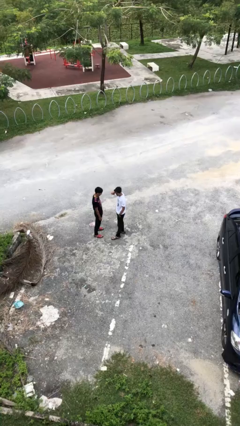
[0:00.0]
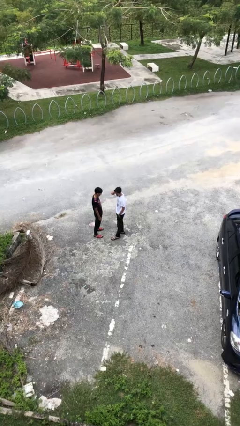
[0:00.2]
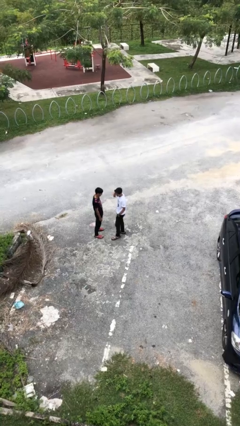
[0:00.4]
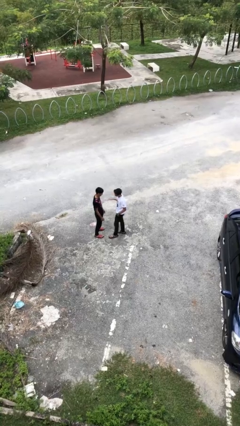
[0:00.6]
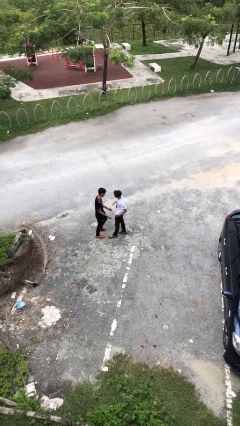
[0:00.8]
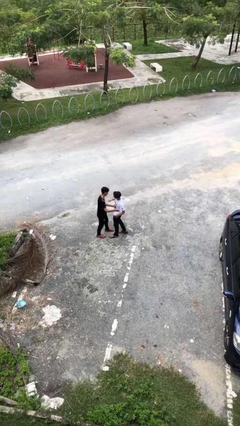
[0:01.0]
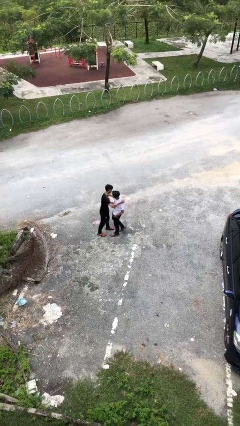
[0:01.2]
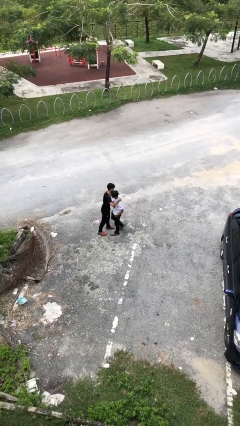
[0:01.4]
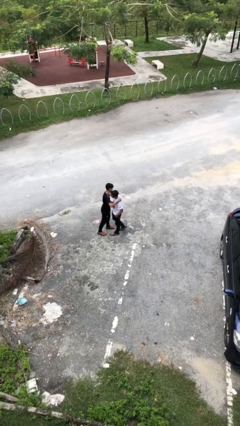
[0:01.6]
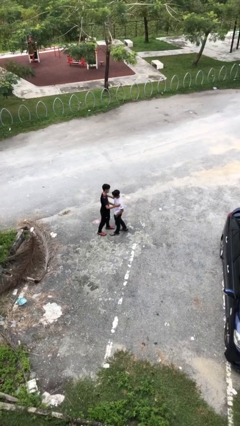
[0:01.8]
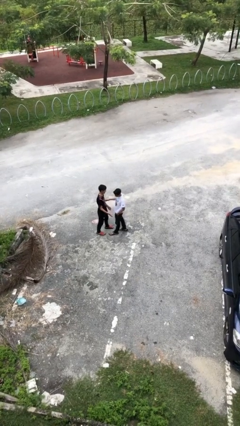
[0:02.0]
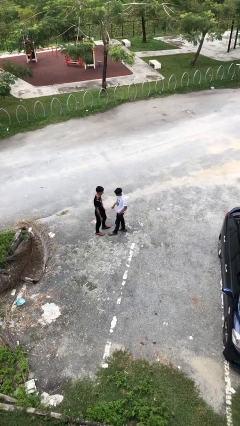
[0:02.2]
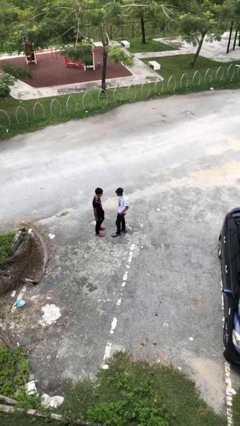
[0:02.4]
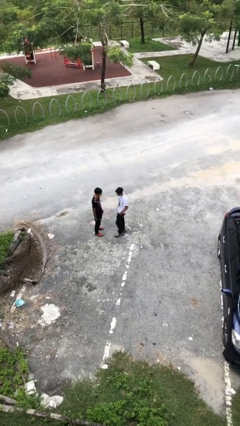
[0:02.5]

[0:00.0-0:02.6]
person embraces person

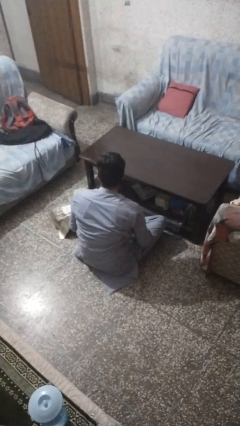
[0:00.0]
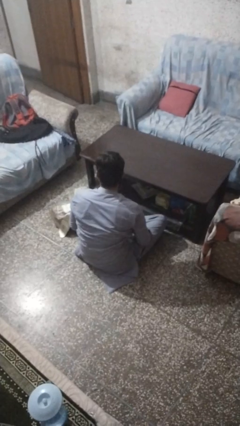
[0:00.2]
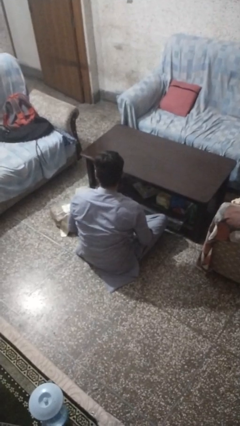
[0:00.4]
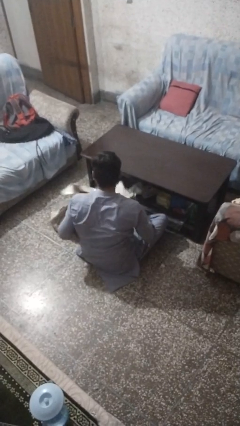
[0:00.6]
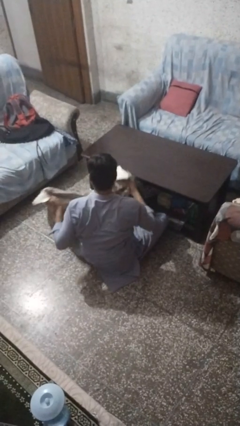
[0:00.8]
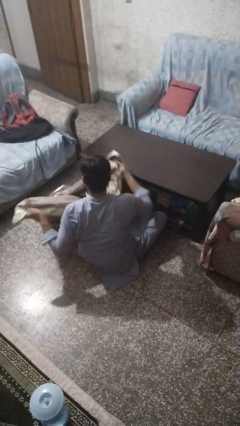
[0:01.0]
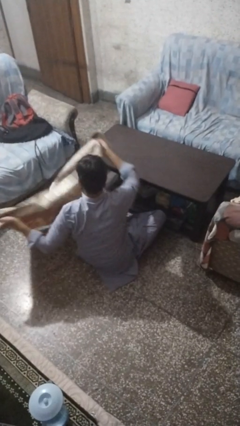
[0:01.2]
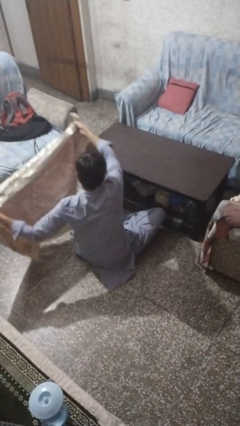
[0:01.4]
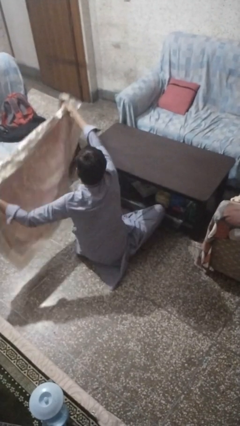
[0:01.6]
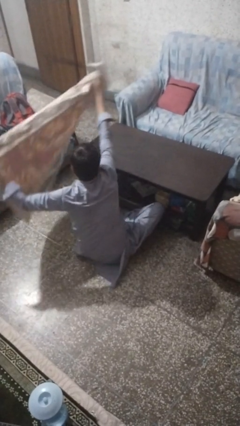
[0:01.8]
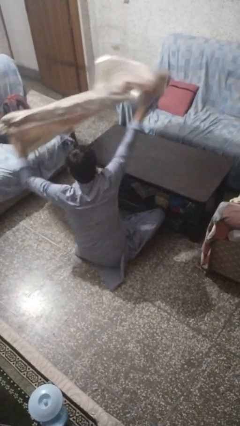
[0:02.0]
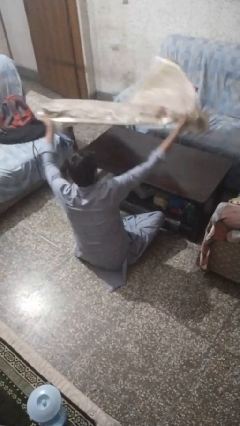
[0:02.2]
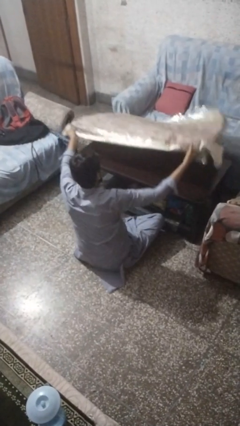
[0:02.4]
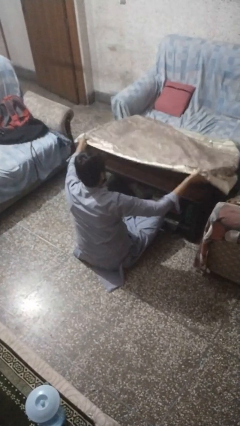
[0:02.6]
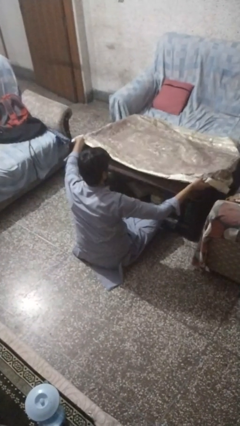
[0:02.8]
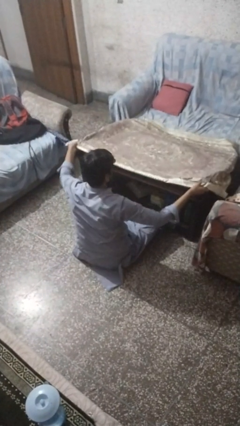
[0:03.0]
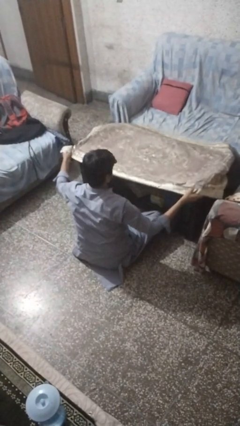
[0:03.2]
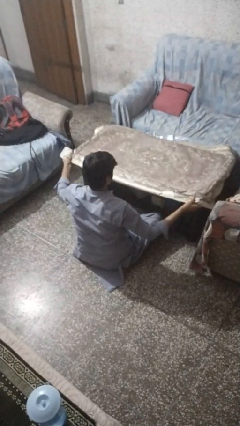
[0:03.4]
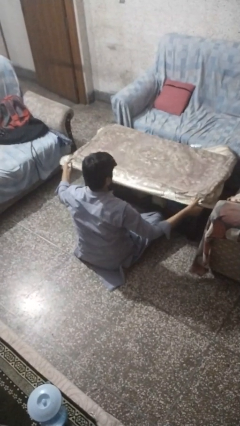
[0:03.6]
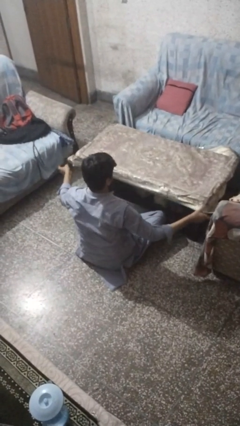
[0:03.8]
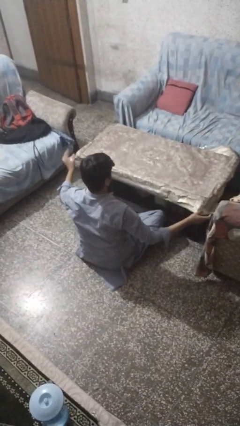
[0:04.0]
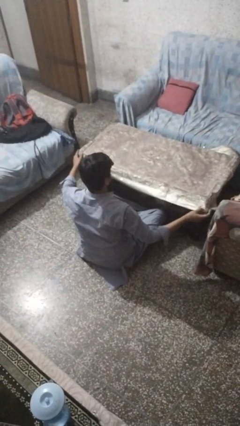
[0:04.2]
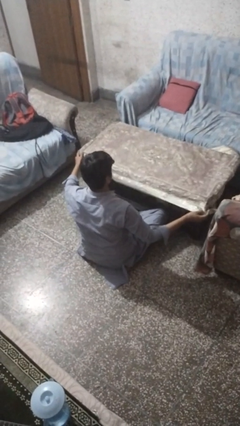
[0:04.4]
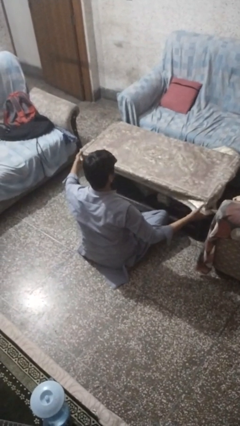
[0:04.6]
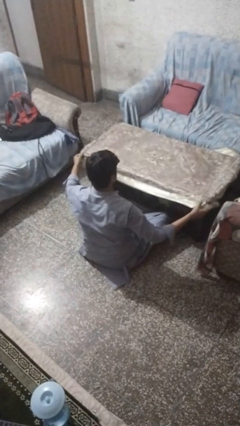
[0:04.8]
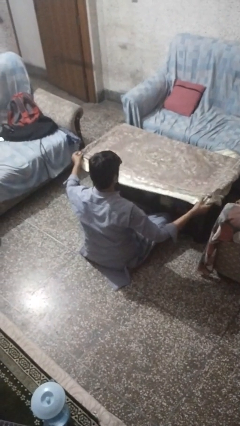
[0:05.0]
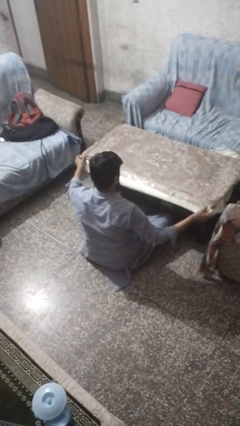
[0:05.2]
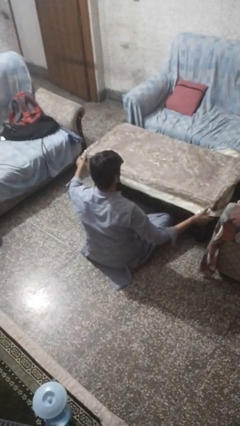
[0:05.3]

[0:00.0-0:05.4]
person spreads tablecloth

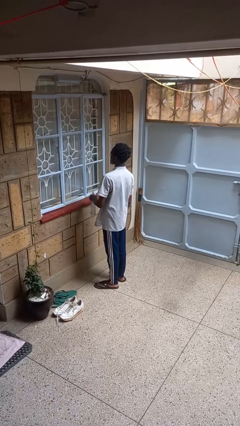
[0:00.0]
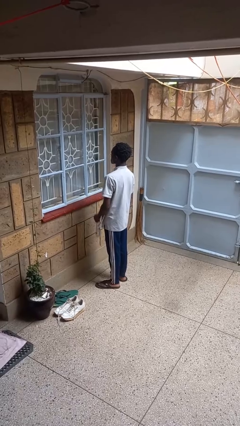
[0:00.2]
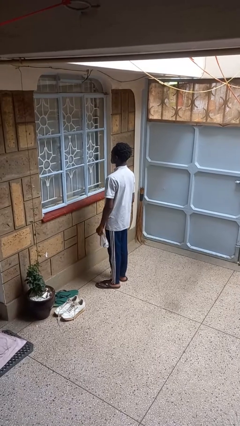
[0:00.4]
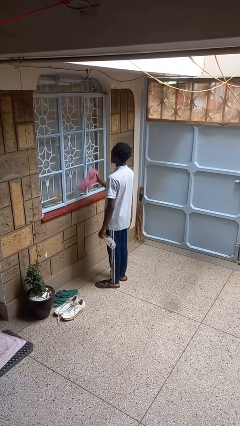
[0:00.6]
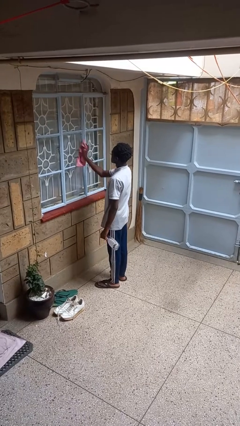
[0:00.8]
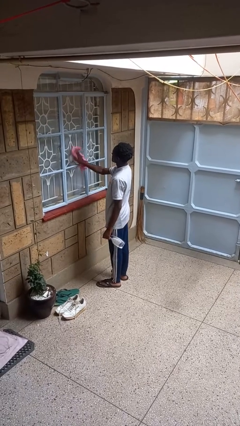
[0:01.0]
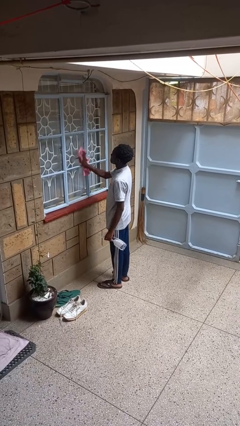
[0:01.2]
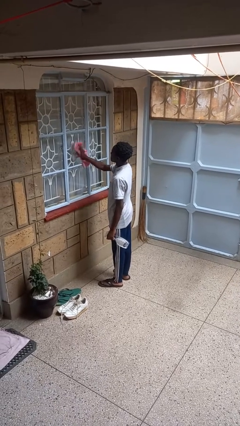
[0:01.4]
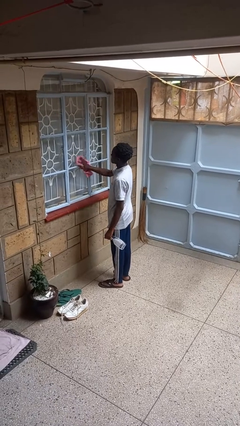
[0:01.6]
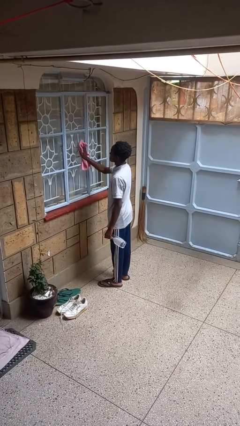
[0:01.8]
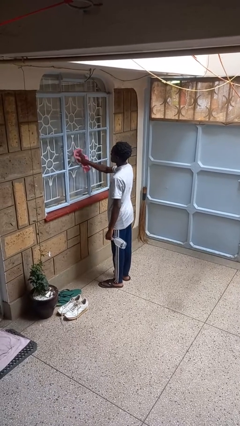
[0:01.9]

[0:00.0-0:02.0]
person washes window

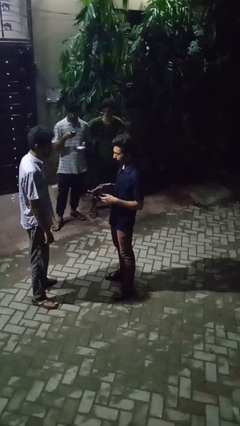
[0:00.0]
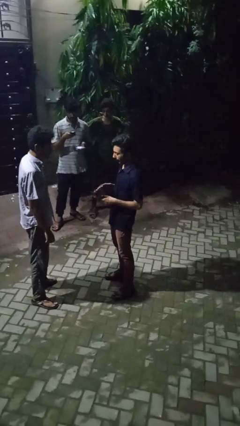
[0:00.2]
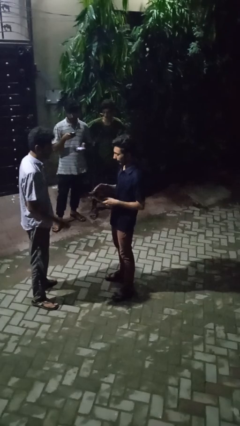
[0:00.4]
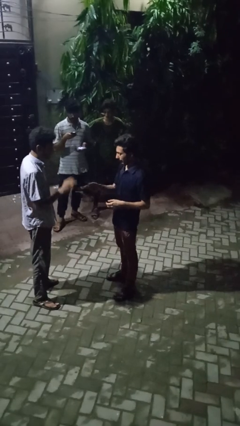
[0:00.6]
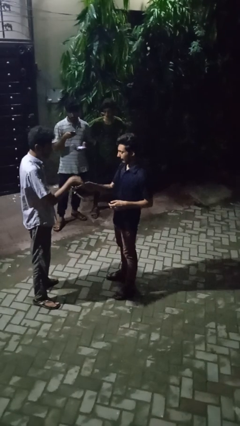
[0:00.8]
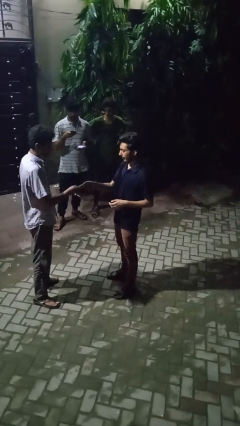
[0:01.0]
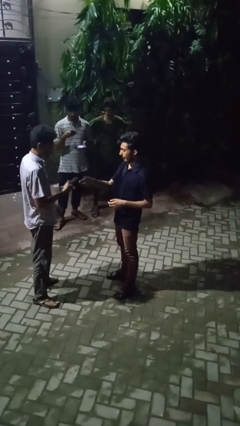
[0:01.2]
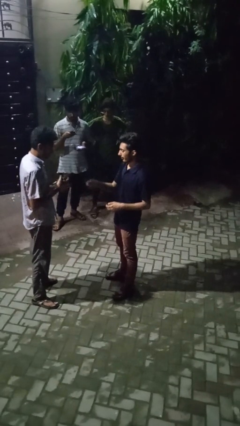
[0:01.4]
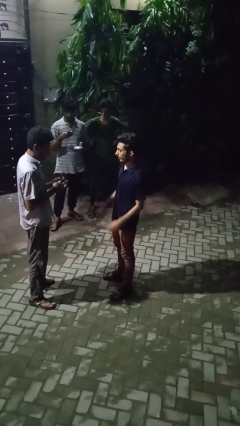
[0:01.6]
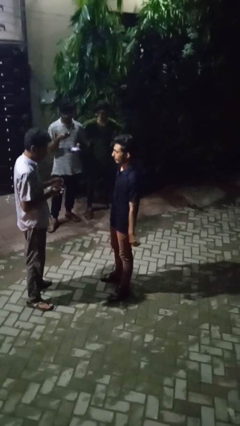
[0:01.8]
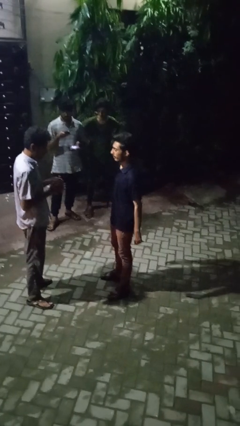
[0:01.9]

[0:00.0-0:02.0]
person transfers object to person

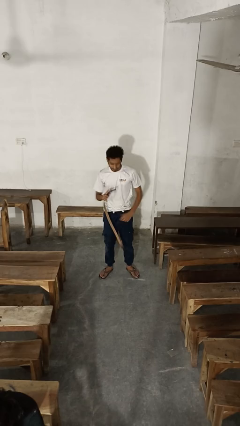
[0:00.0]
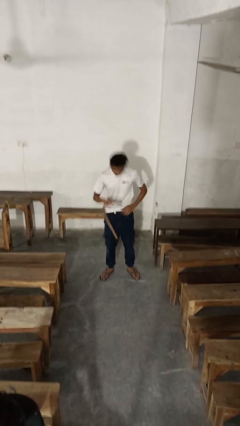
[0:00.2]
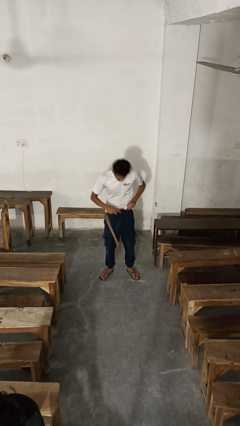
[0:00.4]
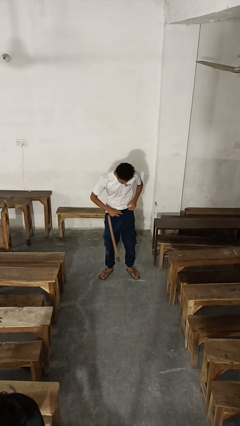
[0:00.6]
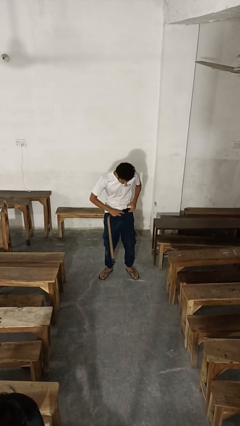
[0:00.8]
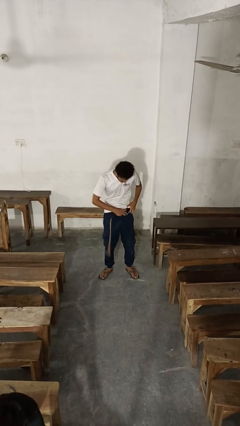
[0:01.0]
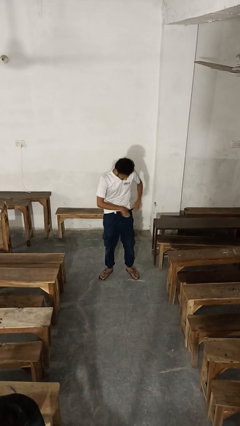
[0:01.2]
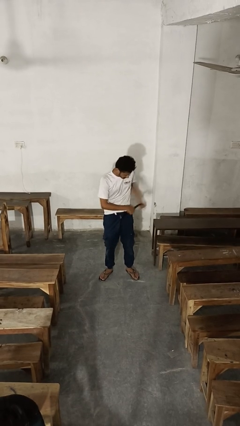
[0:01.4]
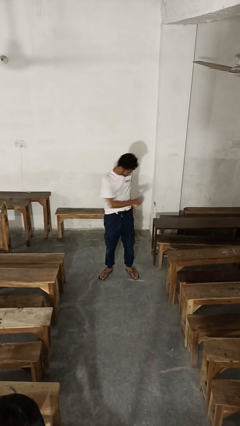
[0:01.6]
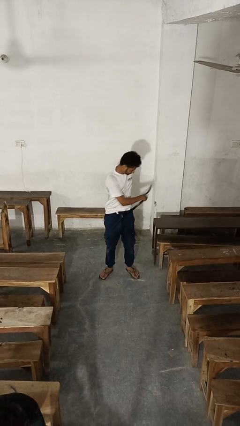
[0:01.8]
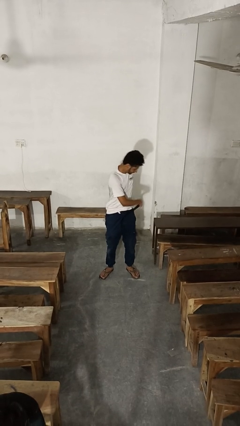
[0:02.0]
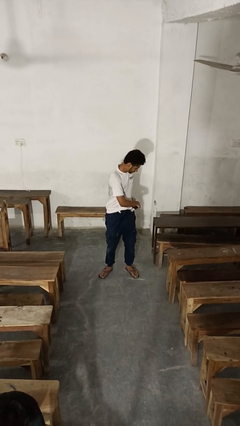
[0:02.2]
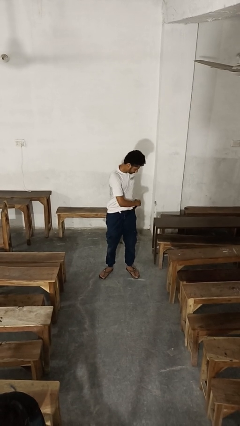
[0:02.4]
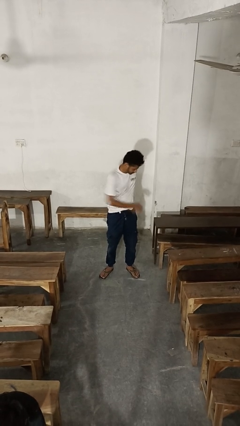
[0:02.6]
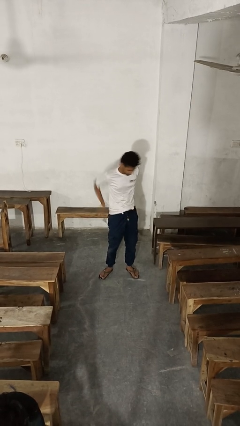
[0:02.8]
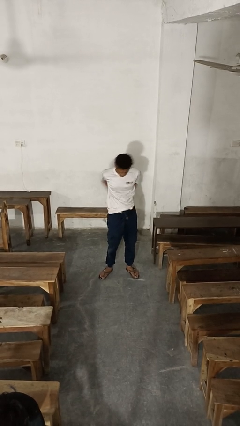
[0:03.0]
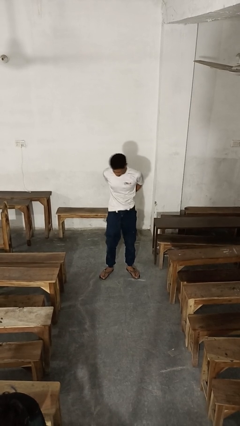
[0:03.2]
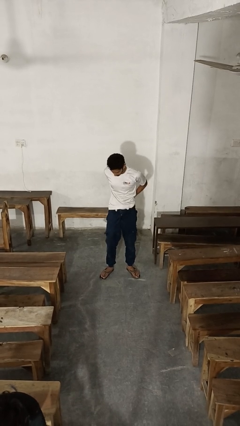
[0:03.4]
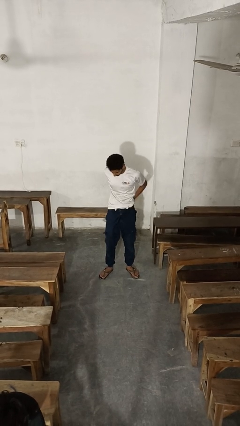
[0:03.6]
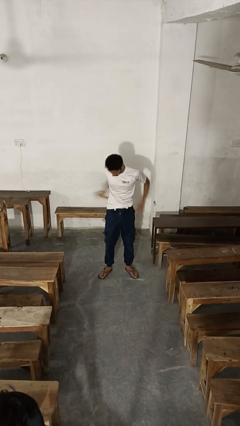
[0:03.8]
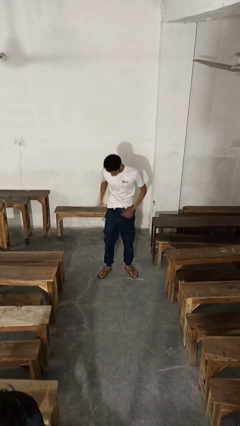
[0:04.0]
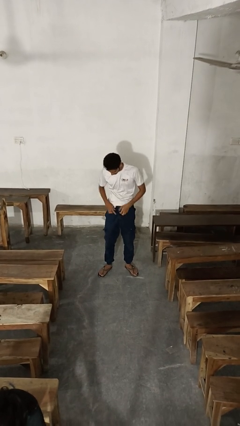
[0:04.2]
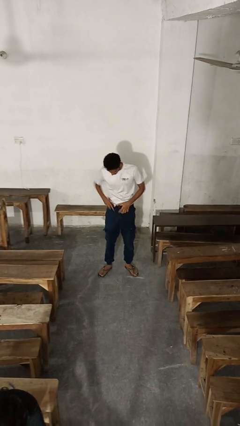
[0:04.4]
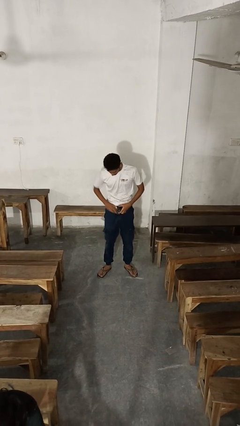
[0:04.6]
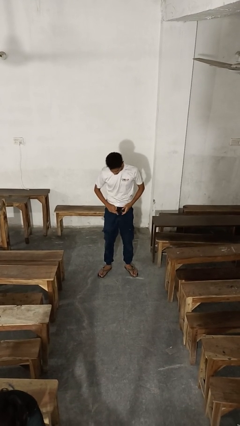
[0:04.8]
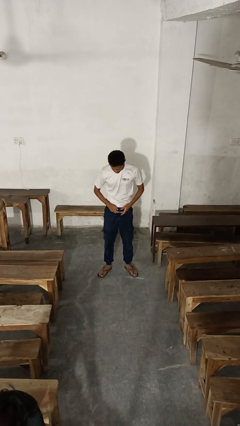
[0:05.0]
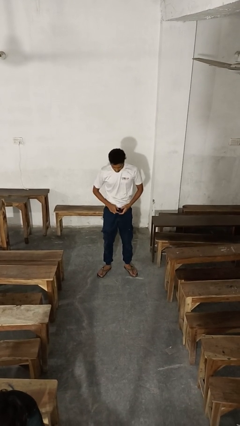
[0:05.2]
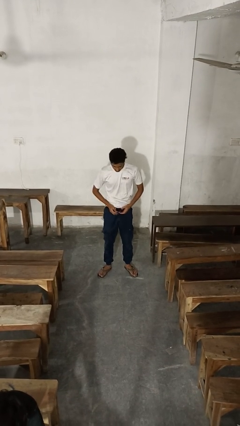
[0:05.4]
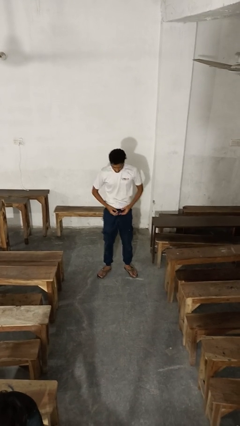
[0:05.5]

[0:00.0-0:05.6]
person puts on belt
